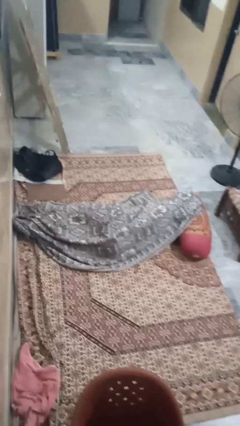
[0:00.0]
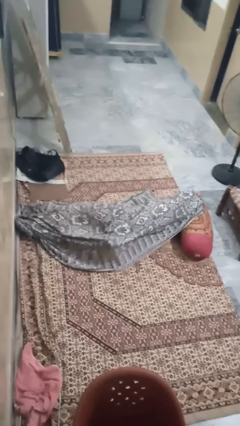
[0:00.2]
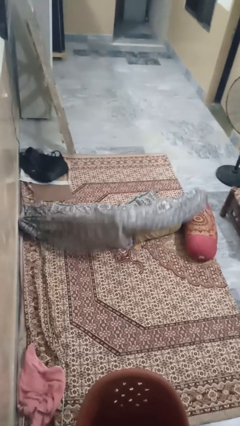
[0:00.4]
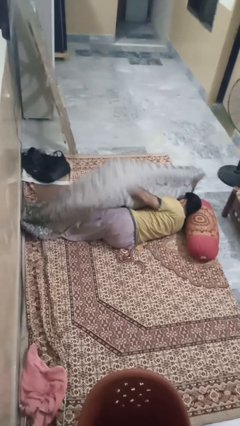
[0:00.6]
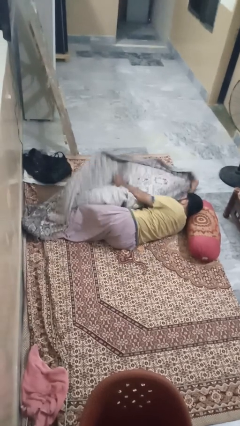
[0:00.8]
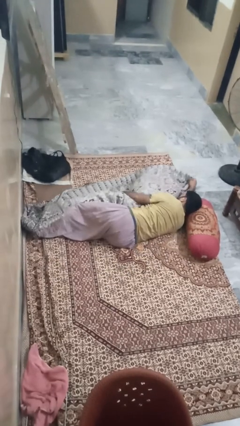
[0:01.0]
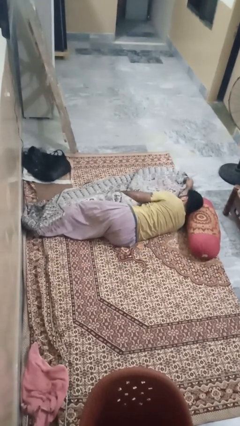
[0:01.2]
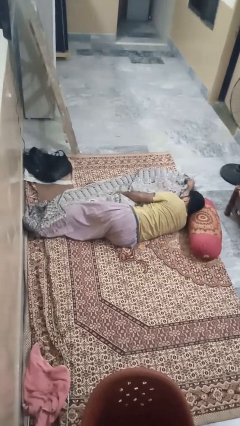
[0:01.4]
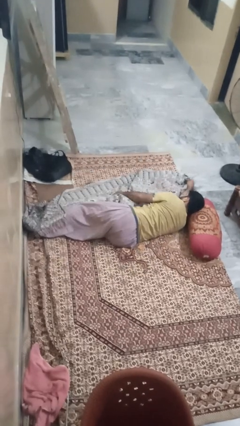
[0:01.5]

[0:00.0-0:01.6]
person uncovers with blanket

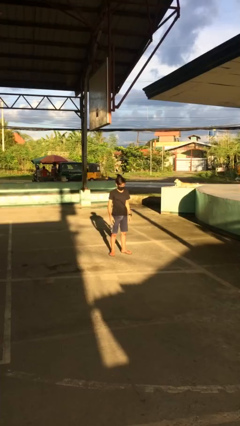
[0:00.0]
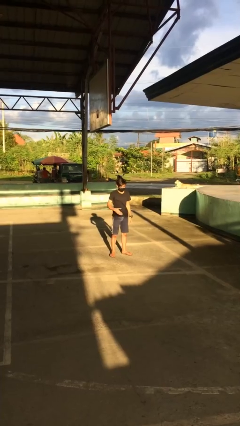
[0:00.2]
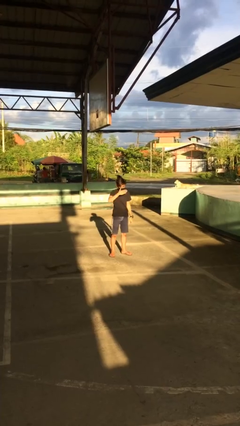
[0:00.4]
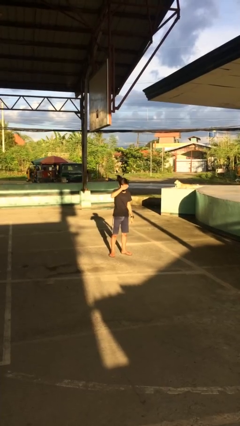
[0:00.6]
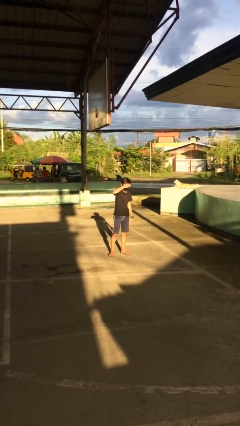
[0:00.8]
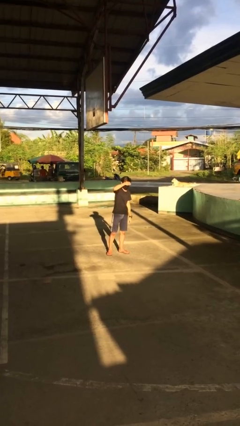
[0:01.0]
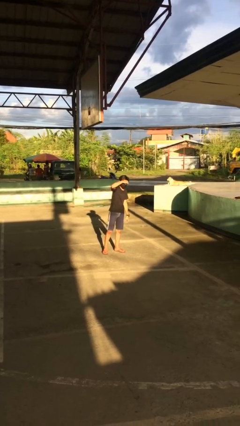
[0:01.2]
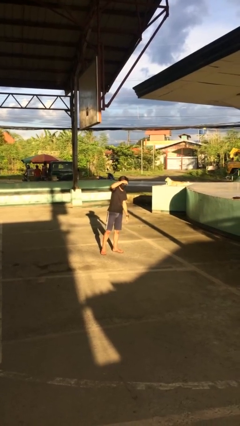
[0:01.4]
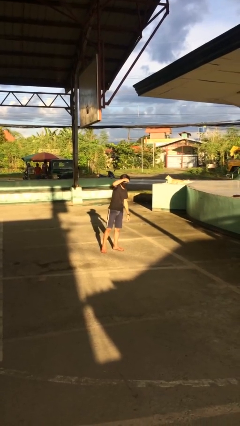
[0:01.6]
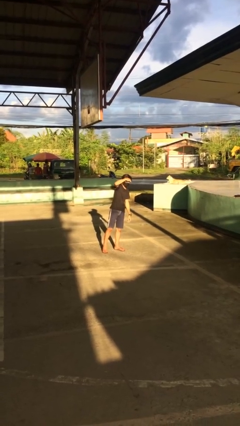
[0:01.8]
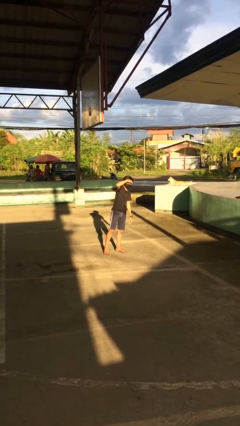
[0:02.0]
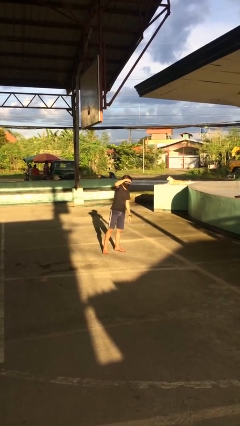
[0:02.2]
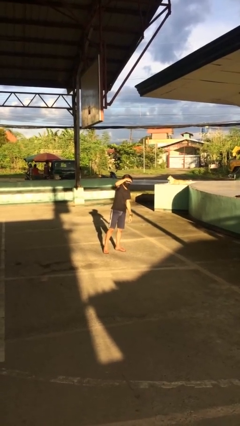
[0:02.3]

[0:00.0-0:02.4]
person shades eyes

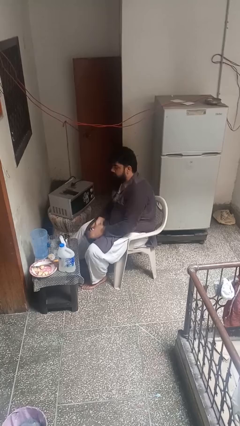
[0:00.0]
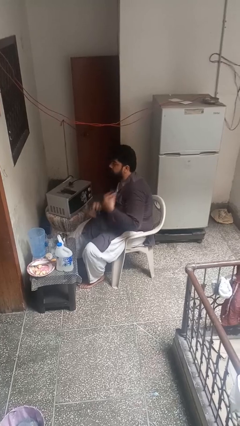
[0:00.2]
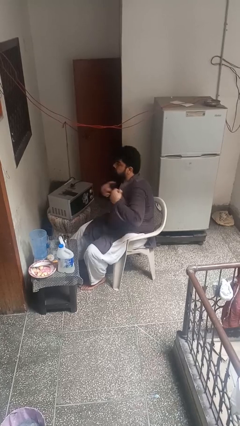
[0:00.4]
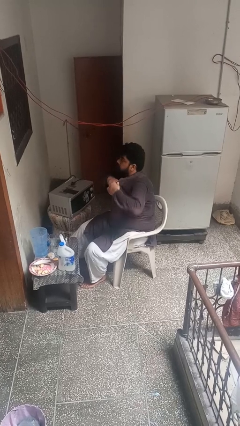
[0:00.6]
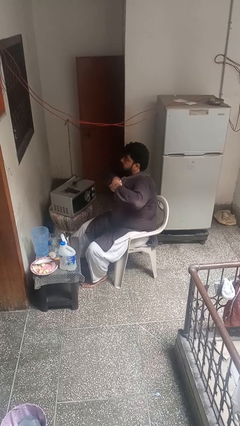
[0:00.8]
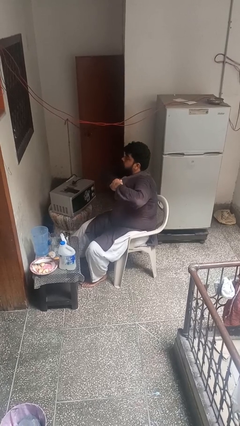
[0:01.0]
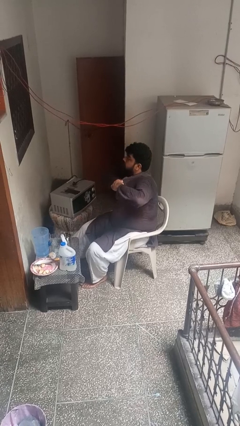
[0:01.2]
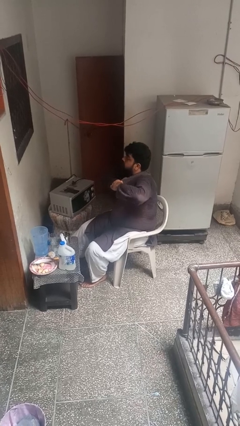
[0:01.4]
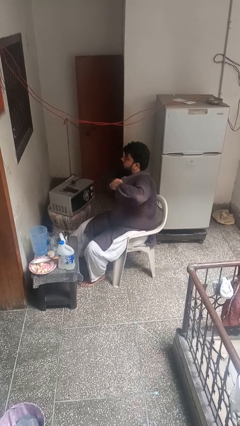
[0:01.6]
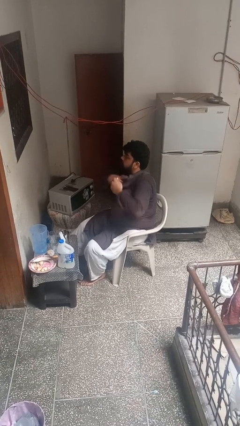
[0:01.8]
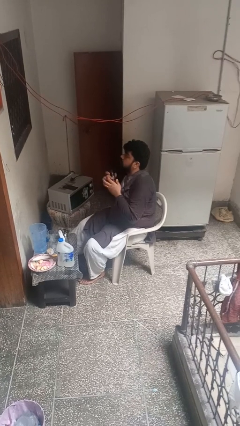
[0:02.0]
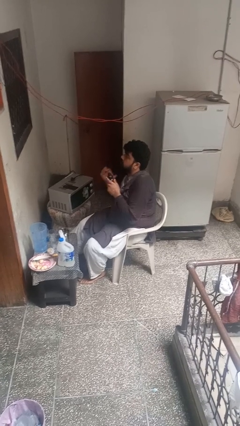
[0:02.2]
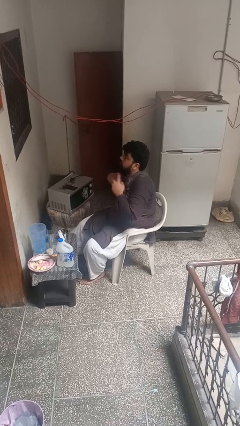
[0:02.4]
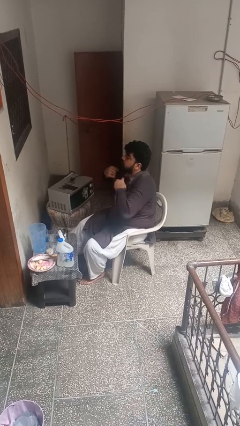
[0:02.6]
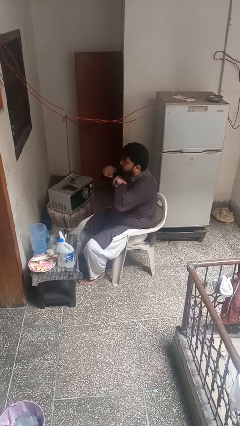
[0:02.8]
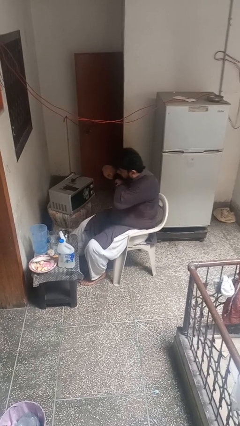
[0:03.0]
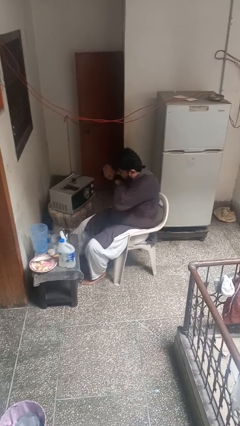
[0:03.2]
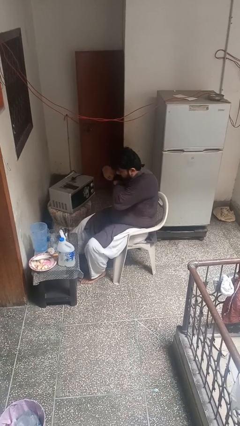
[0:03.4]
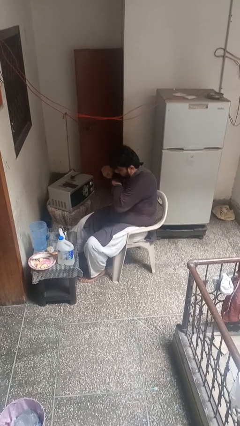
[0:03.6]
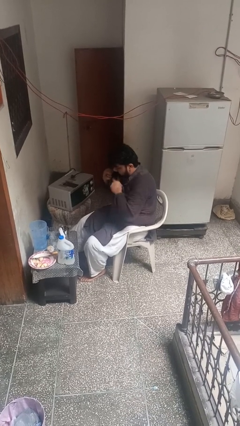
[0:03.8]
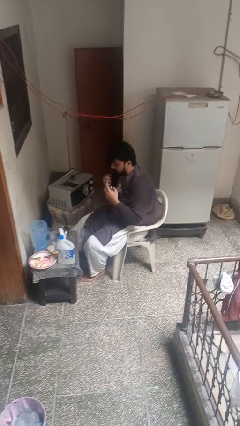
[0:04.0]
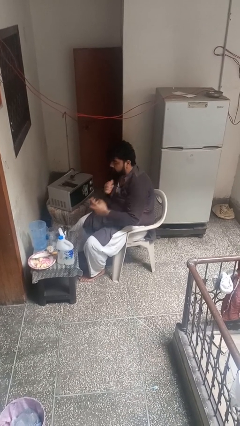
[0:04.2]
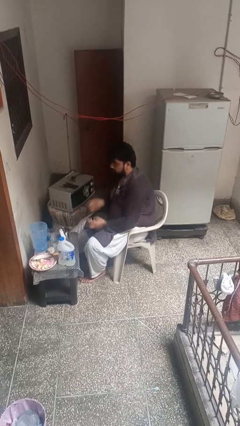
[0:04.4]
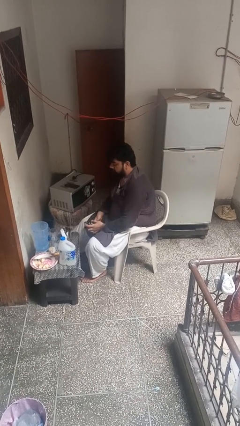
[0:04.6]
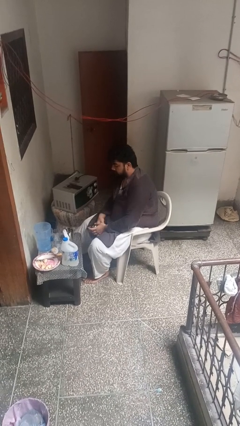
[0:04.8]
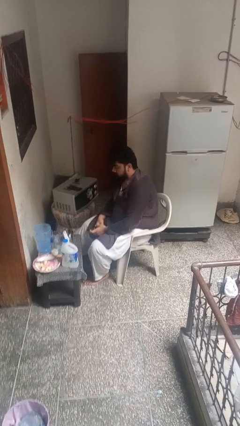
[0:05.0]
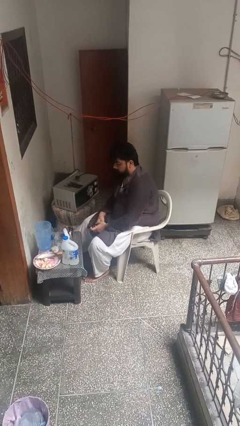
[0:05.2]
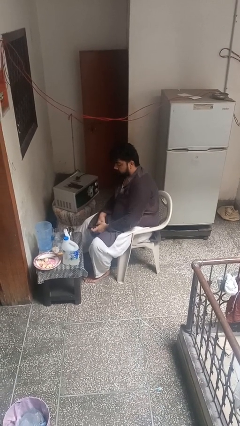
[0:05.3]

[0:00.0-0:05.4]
person applies deodorant

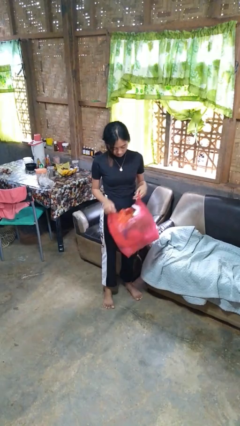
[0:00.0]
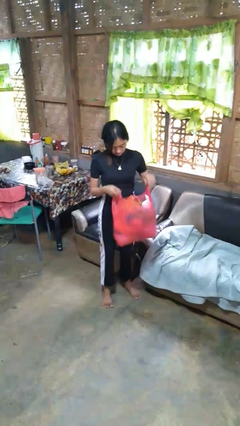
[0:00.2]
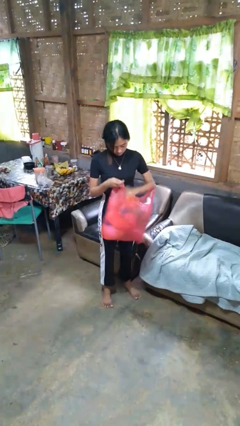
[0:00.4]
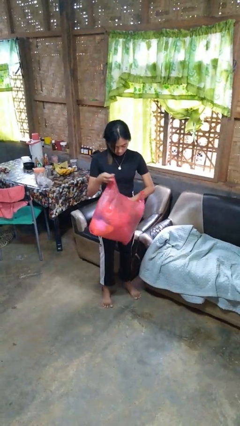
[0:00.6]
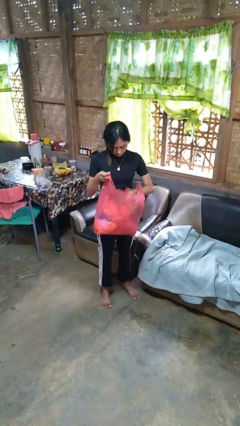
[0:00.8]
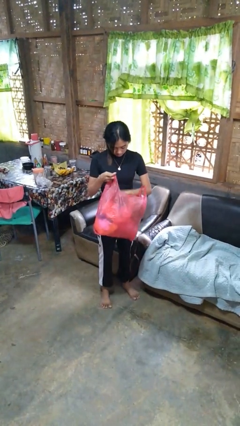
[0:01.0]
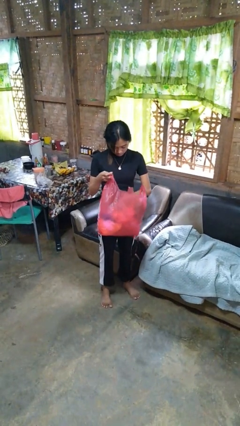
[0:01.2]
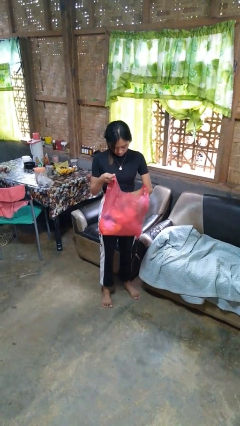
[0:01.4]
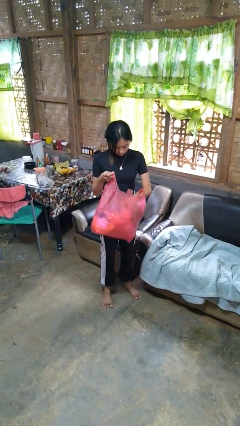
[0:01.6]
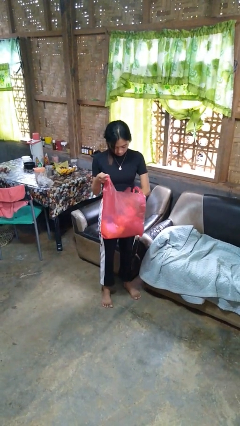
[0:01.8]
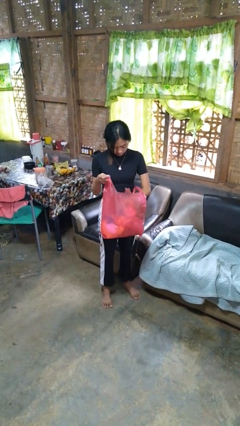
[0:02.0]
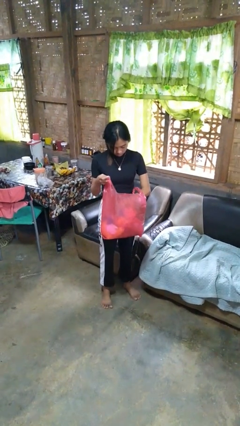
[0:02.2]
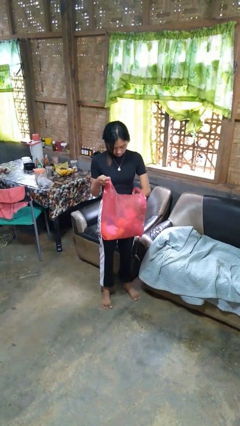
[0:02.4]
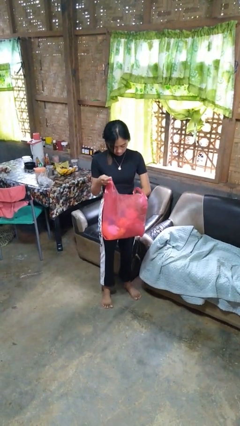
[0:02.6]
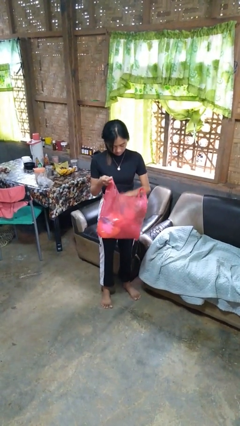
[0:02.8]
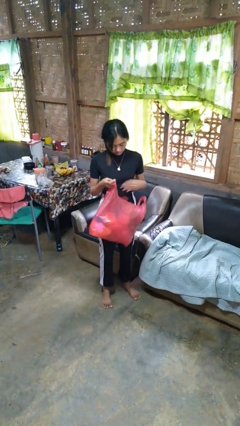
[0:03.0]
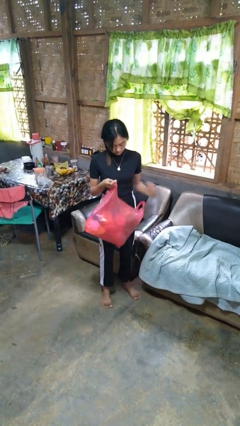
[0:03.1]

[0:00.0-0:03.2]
person searches in bag

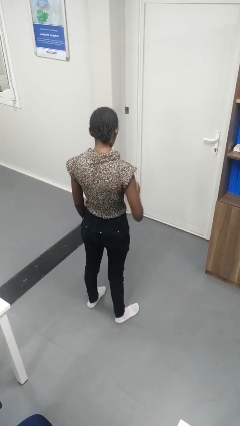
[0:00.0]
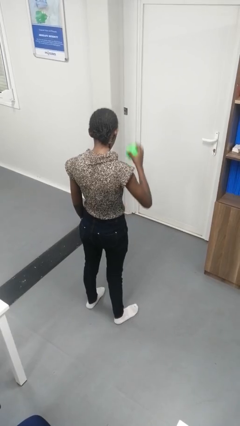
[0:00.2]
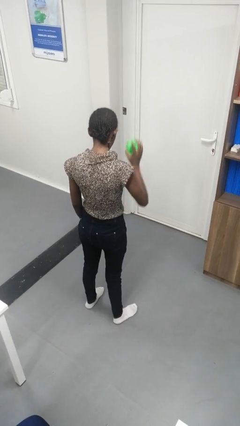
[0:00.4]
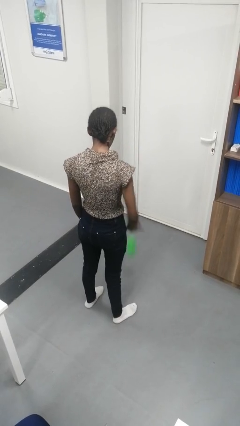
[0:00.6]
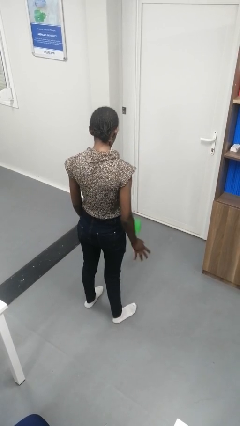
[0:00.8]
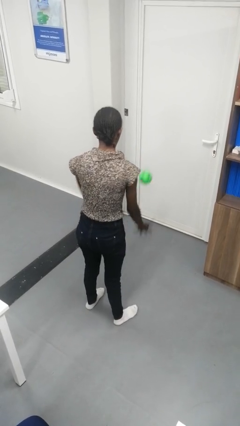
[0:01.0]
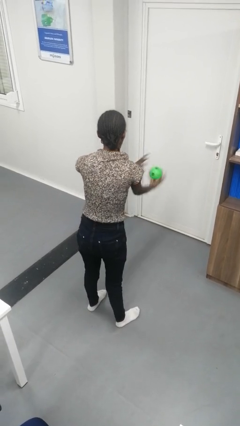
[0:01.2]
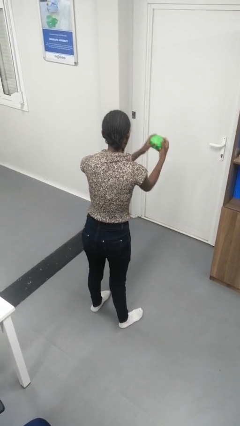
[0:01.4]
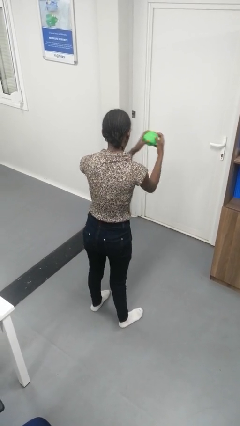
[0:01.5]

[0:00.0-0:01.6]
person bounces ball on floor

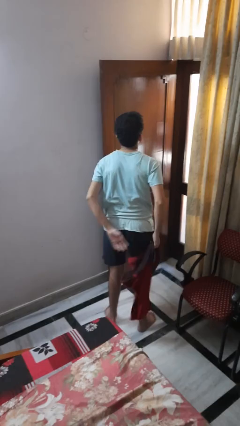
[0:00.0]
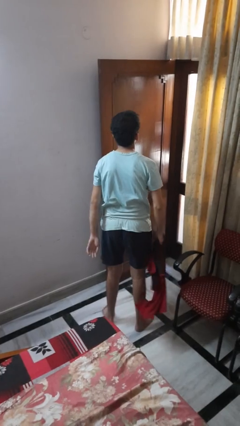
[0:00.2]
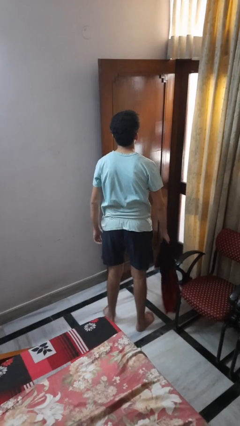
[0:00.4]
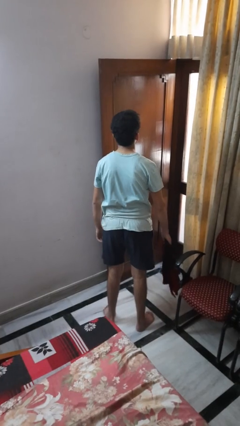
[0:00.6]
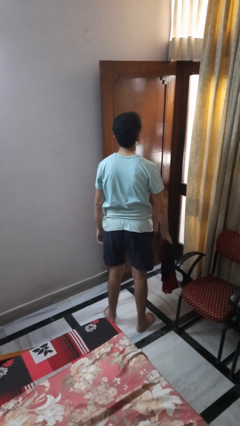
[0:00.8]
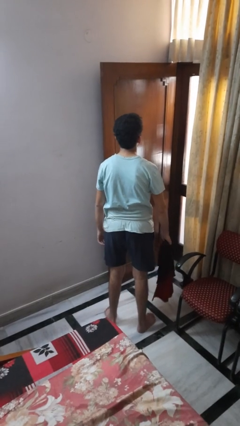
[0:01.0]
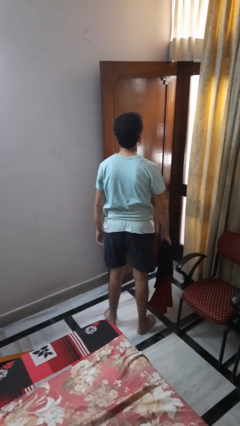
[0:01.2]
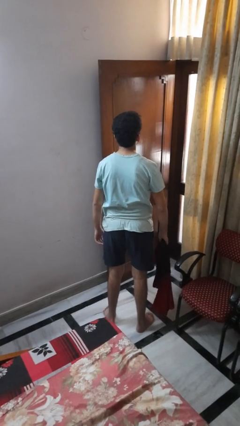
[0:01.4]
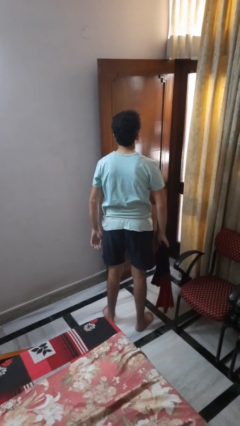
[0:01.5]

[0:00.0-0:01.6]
person unties jacket around waist

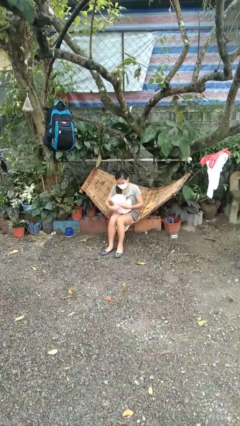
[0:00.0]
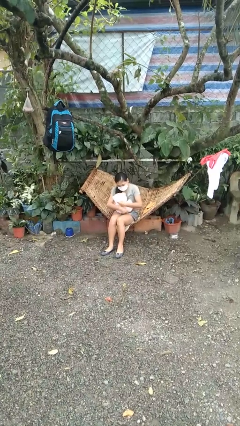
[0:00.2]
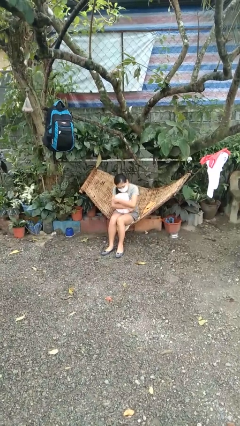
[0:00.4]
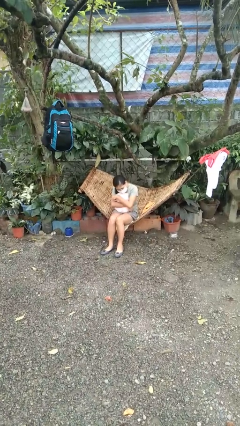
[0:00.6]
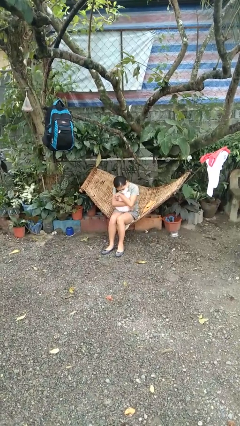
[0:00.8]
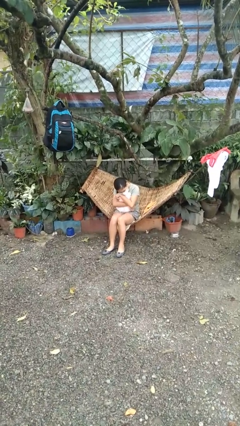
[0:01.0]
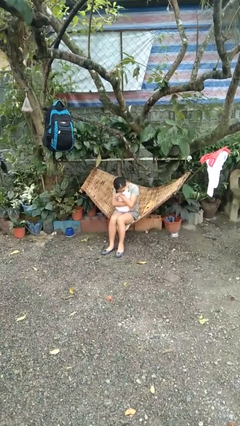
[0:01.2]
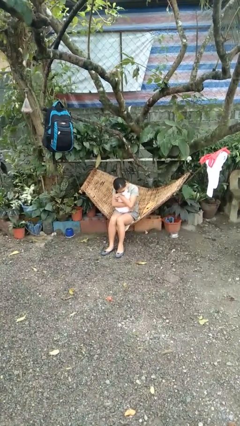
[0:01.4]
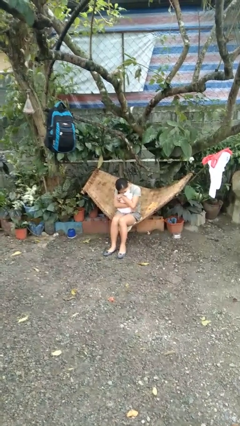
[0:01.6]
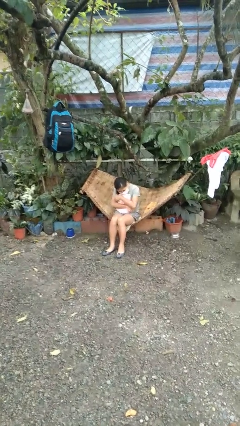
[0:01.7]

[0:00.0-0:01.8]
person hugs stuffed animal
